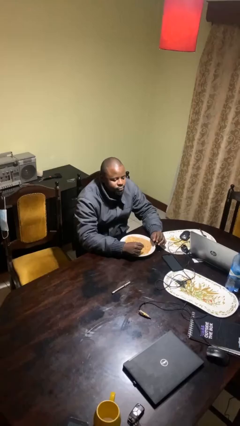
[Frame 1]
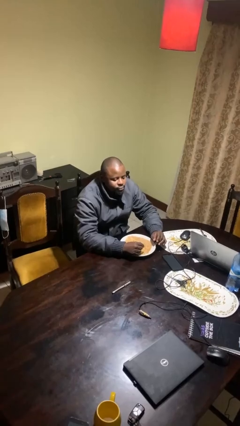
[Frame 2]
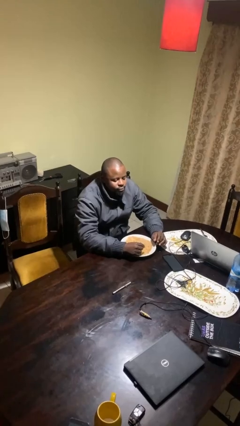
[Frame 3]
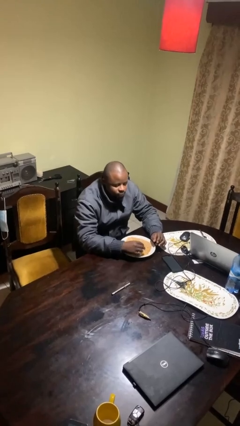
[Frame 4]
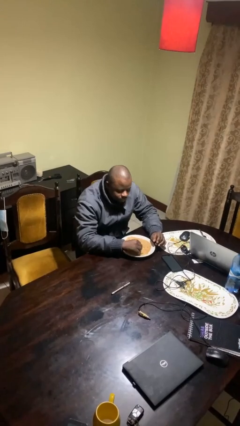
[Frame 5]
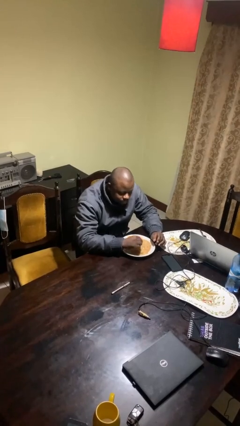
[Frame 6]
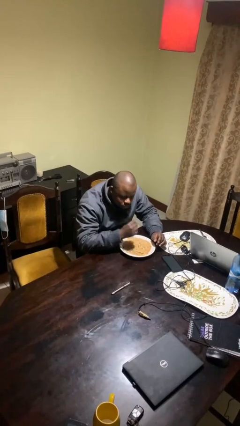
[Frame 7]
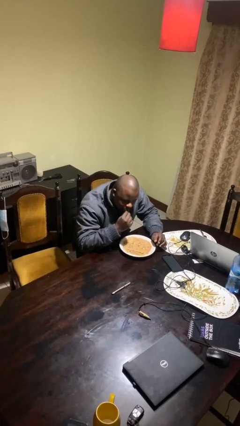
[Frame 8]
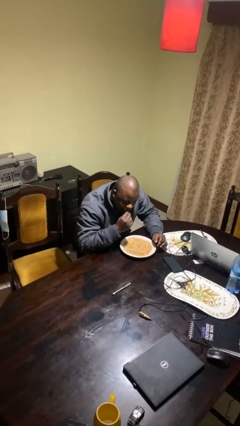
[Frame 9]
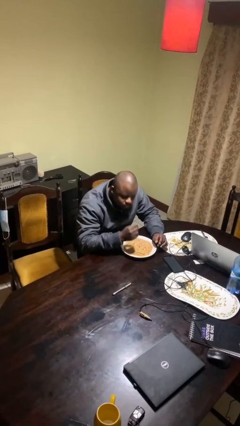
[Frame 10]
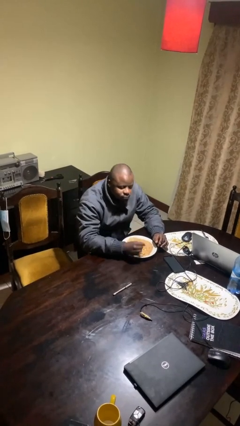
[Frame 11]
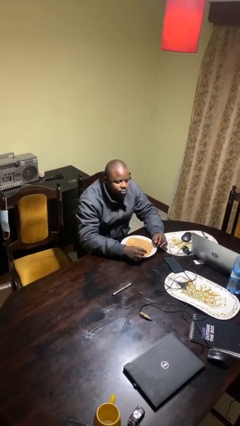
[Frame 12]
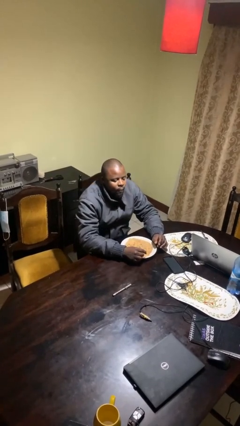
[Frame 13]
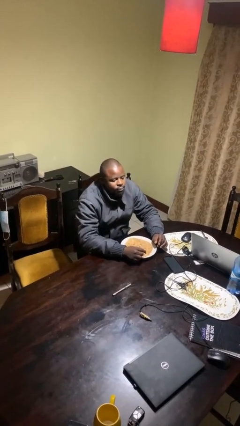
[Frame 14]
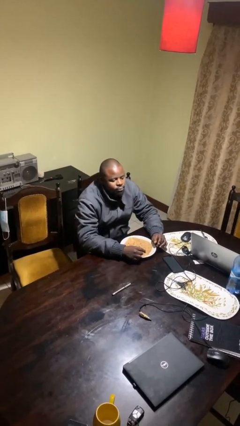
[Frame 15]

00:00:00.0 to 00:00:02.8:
person eats with hands

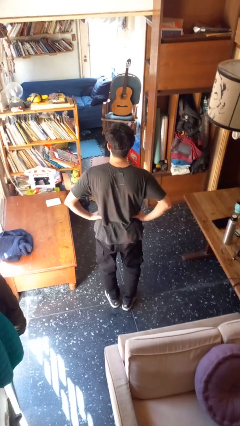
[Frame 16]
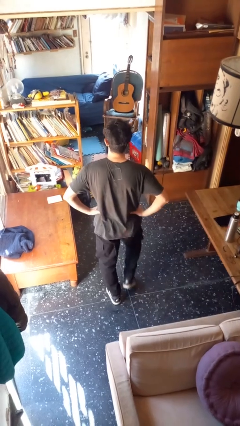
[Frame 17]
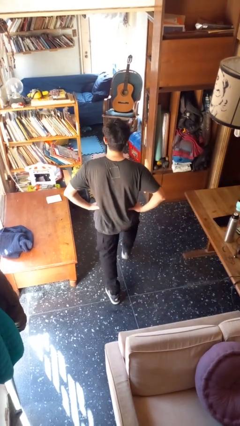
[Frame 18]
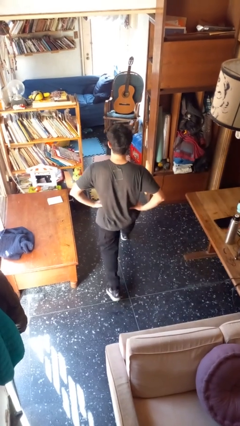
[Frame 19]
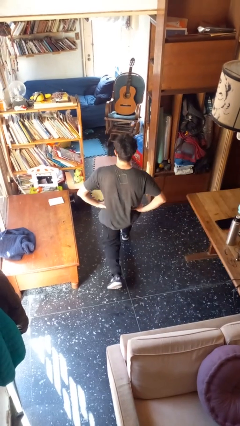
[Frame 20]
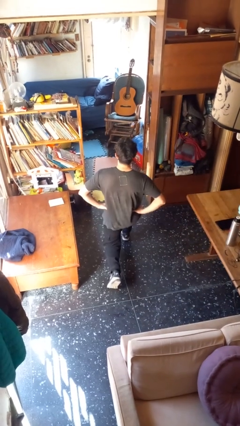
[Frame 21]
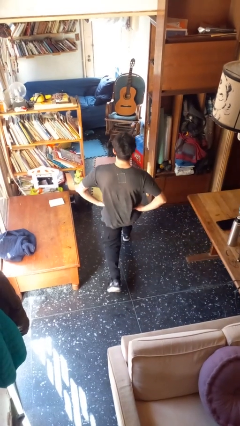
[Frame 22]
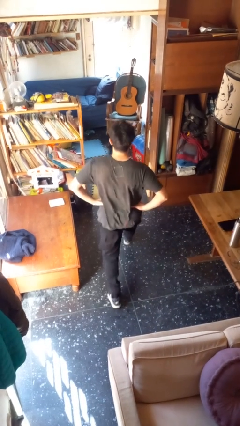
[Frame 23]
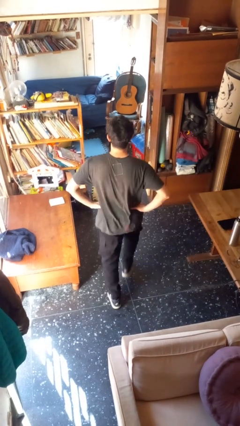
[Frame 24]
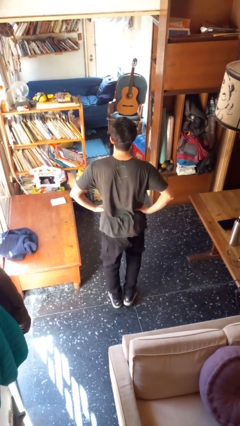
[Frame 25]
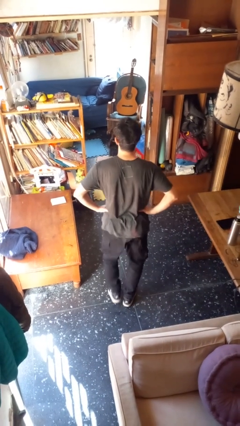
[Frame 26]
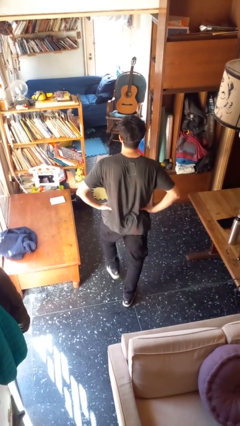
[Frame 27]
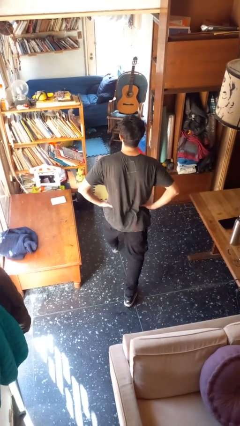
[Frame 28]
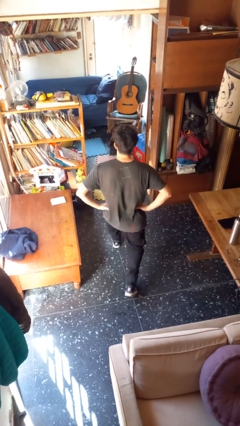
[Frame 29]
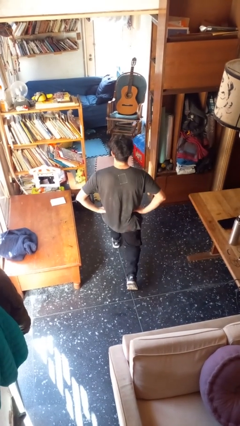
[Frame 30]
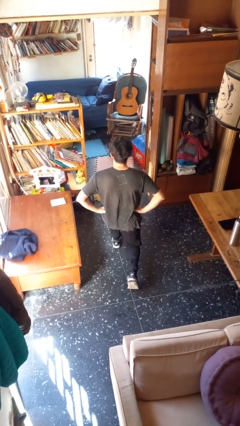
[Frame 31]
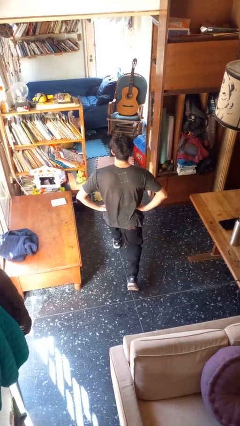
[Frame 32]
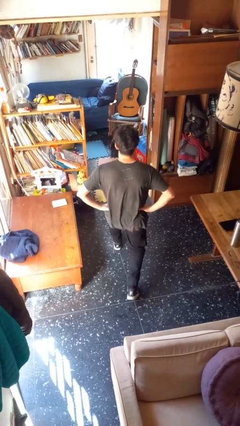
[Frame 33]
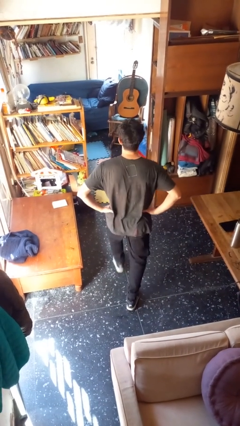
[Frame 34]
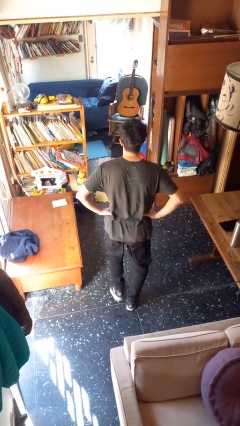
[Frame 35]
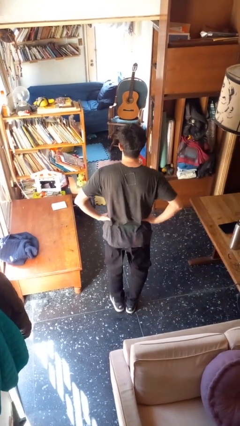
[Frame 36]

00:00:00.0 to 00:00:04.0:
person exercises with lunges

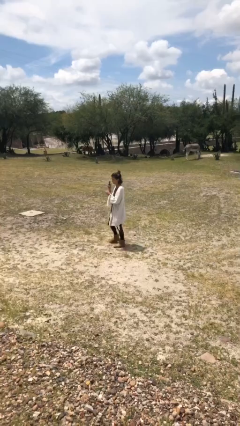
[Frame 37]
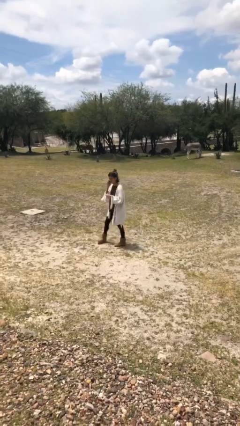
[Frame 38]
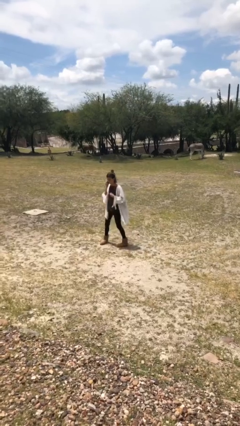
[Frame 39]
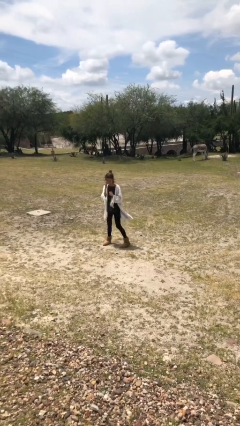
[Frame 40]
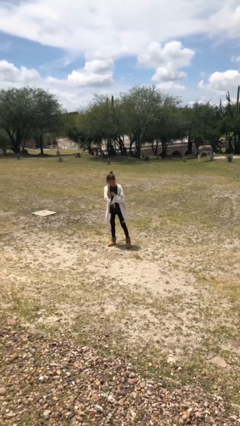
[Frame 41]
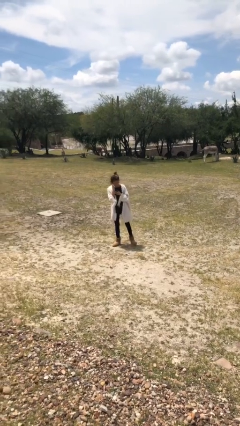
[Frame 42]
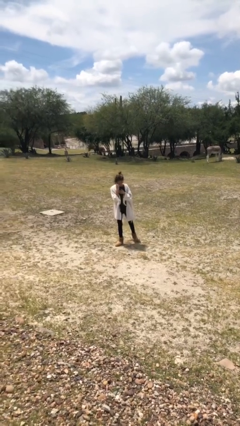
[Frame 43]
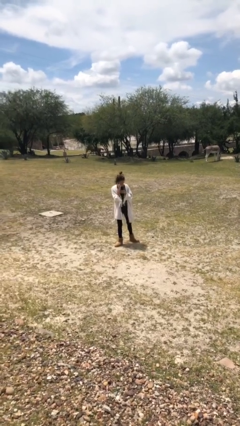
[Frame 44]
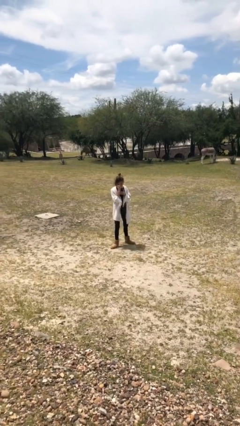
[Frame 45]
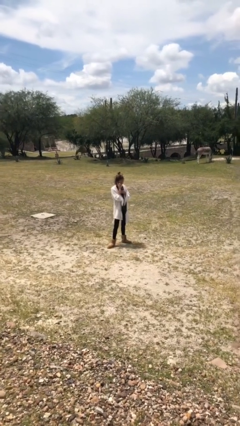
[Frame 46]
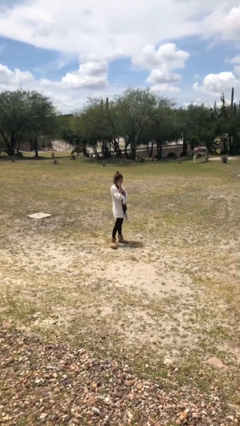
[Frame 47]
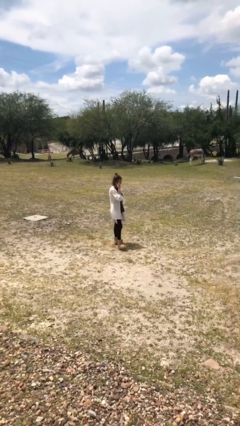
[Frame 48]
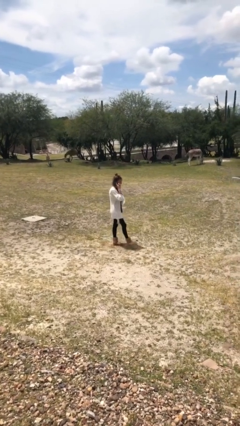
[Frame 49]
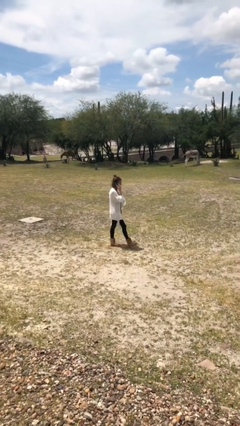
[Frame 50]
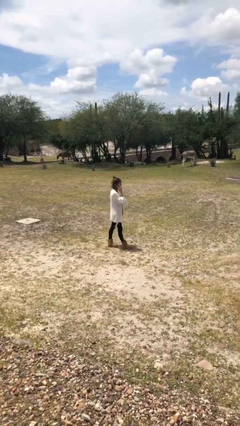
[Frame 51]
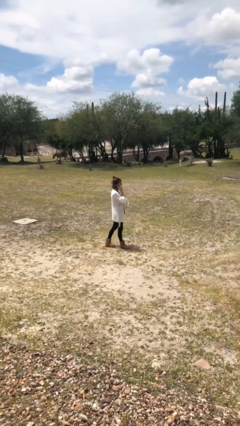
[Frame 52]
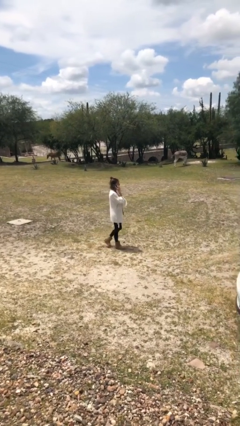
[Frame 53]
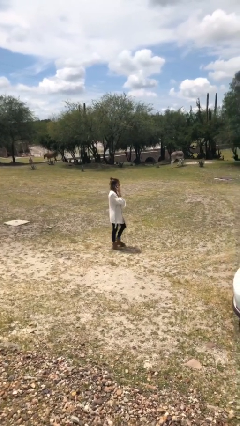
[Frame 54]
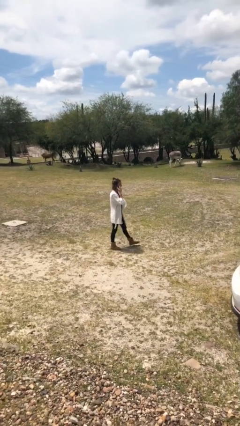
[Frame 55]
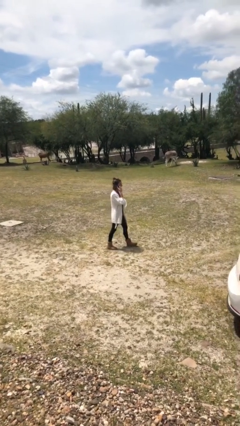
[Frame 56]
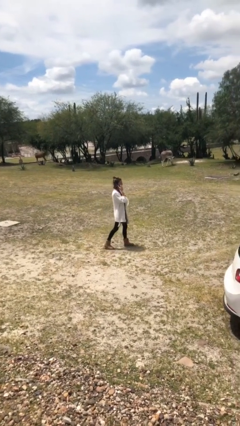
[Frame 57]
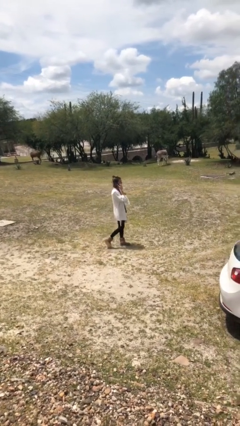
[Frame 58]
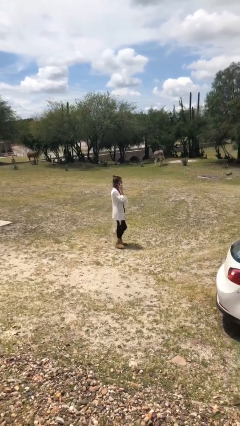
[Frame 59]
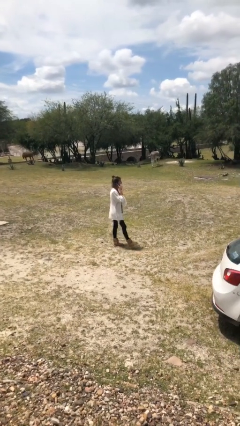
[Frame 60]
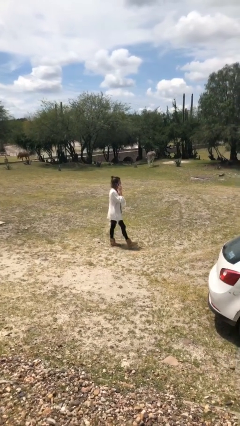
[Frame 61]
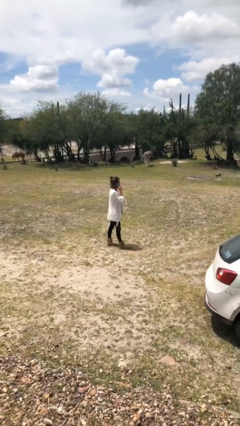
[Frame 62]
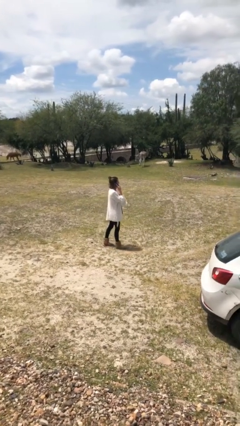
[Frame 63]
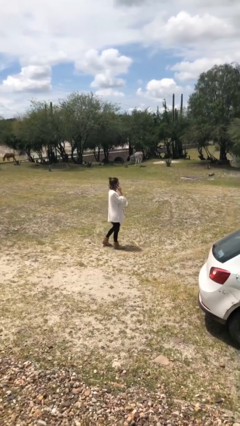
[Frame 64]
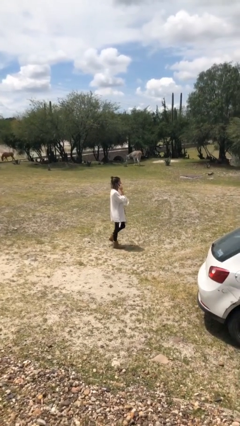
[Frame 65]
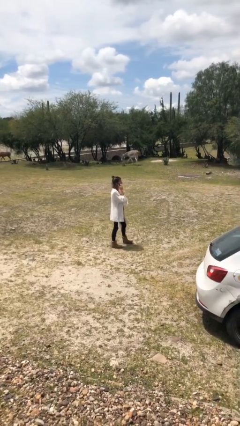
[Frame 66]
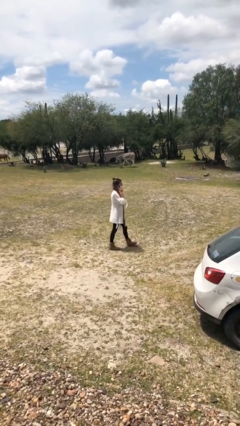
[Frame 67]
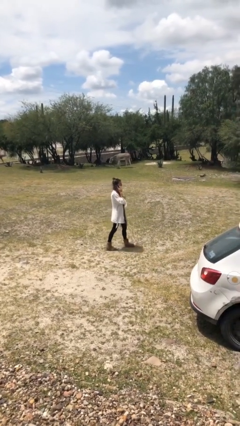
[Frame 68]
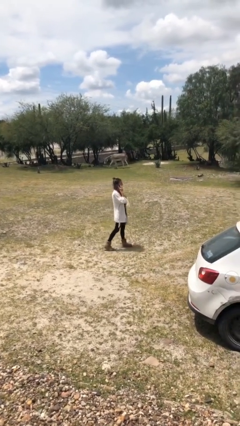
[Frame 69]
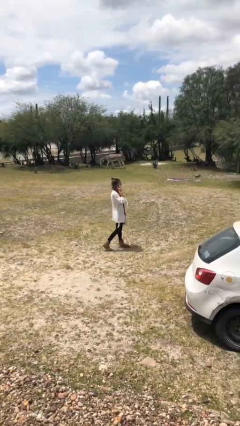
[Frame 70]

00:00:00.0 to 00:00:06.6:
person talks on phone

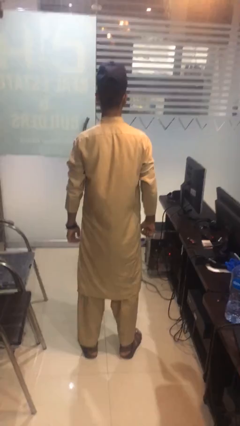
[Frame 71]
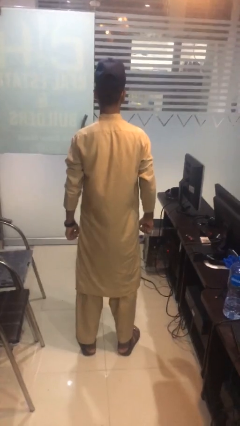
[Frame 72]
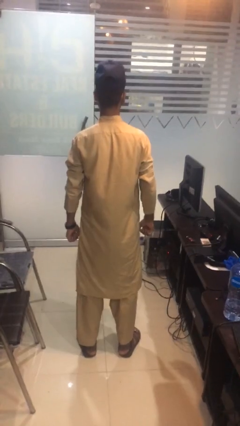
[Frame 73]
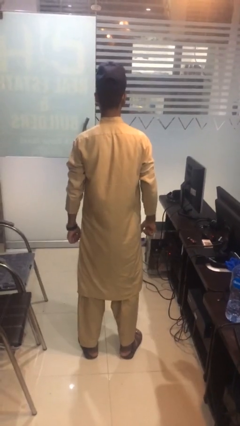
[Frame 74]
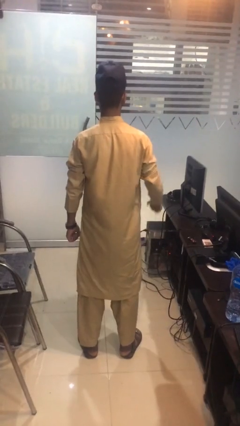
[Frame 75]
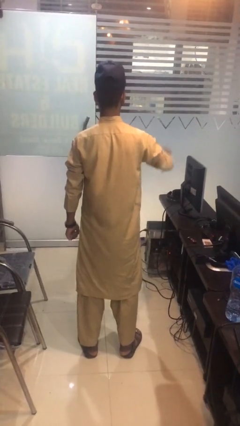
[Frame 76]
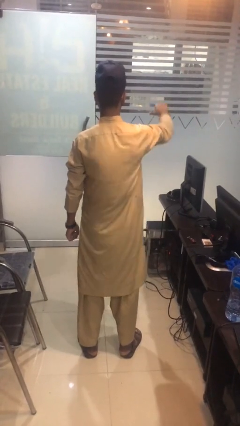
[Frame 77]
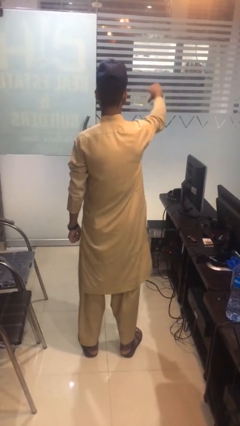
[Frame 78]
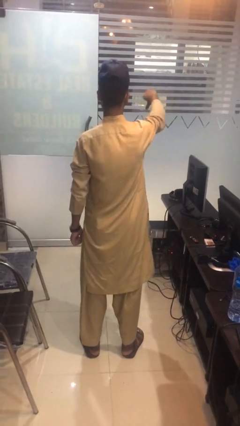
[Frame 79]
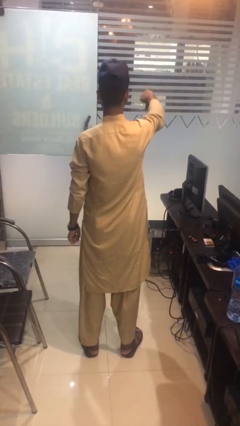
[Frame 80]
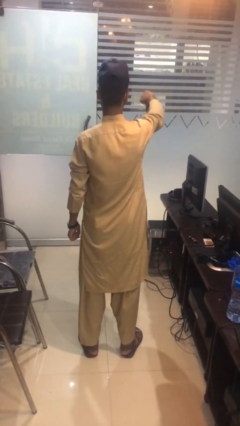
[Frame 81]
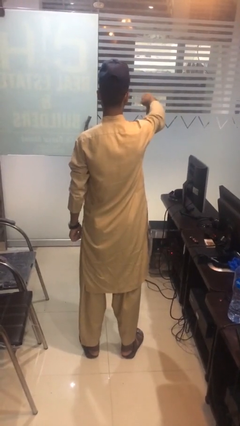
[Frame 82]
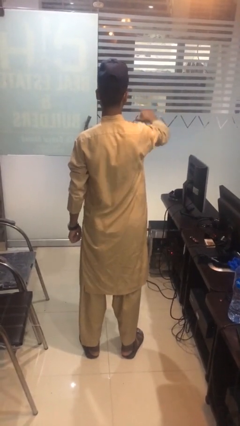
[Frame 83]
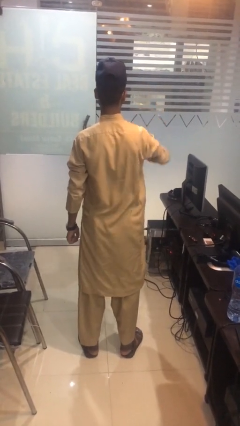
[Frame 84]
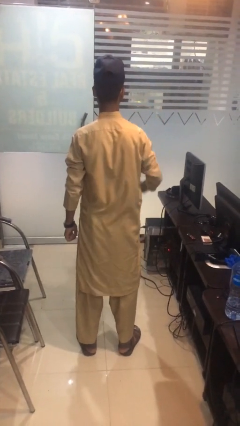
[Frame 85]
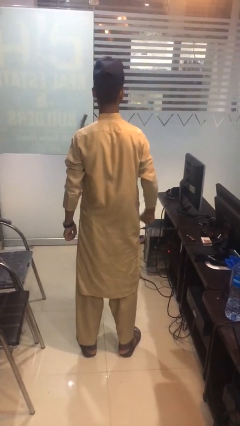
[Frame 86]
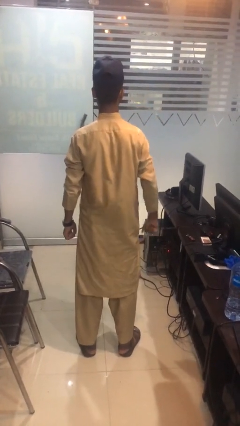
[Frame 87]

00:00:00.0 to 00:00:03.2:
person gestures thumbs down

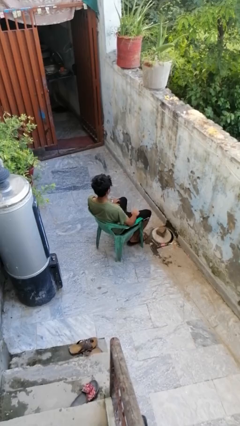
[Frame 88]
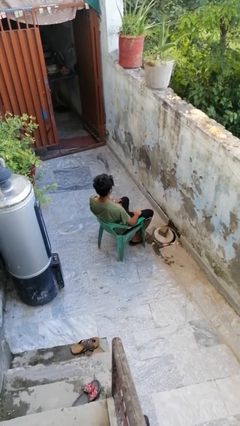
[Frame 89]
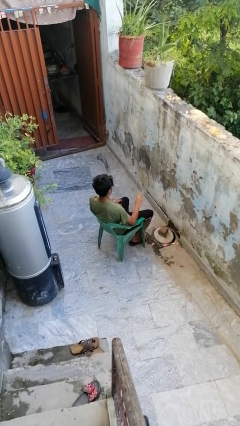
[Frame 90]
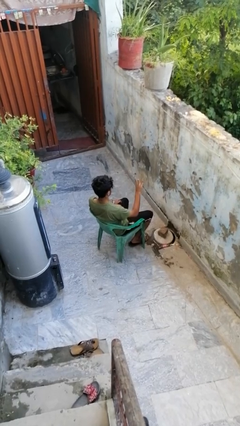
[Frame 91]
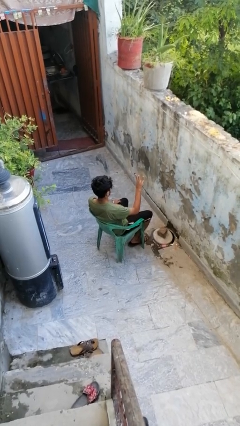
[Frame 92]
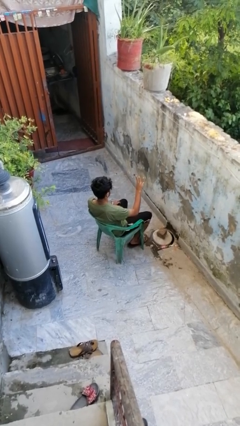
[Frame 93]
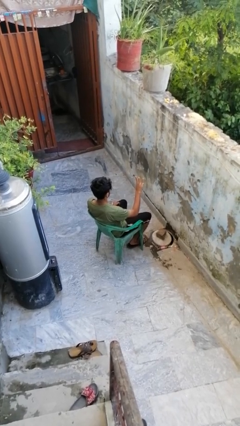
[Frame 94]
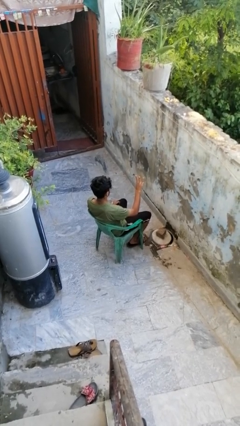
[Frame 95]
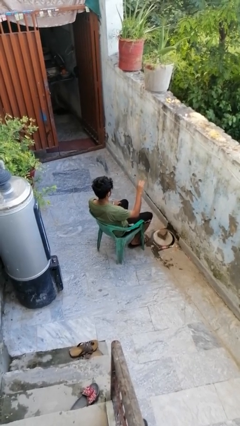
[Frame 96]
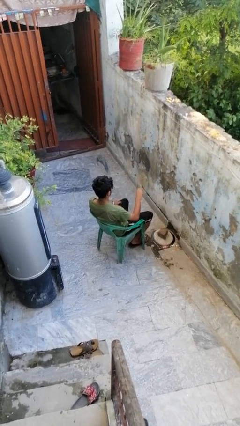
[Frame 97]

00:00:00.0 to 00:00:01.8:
person gestures number three
